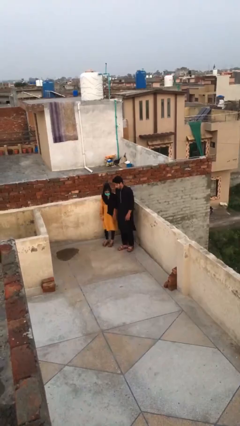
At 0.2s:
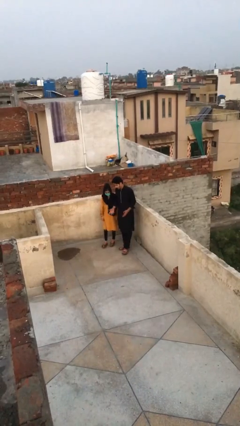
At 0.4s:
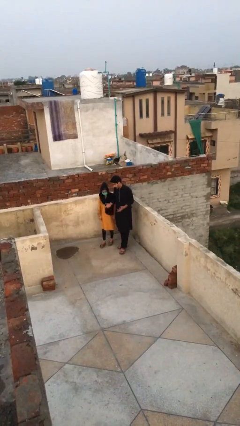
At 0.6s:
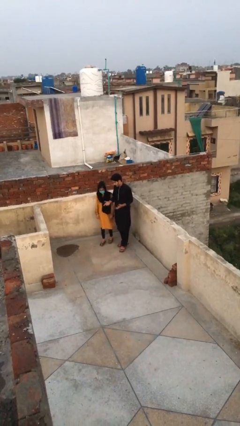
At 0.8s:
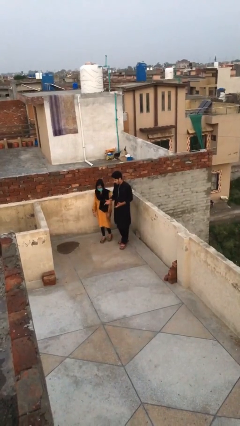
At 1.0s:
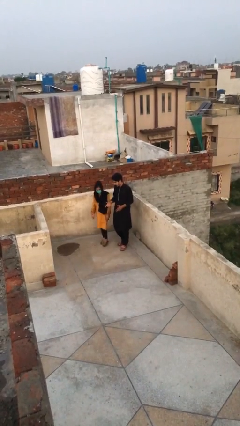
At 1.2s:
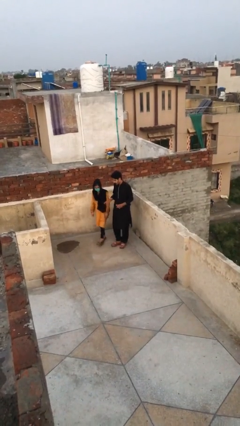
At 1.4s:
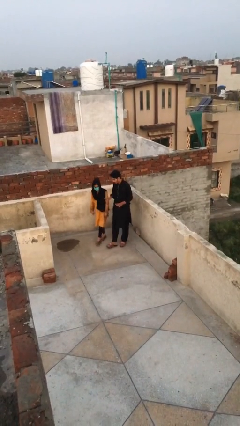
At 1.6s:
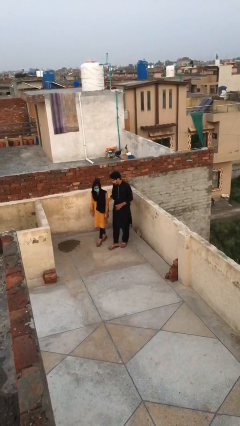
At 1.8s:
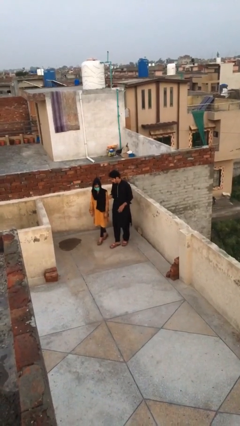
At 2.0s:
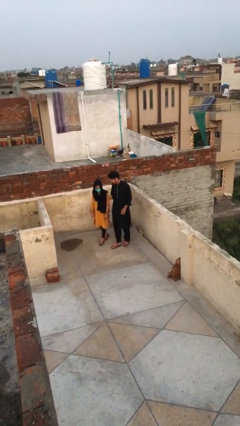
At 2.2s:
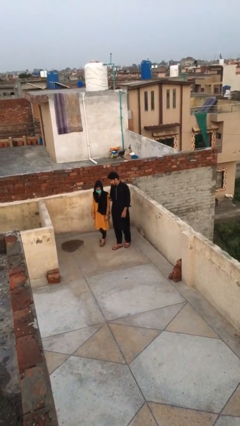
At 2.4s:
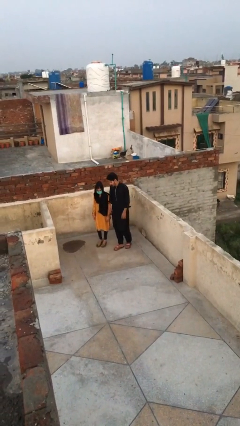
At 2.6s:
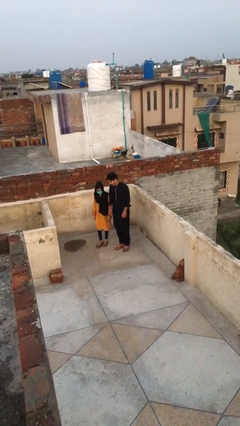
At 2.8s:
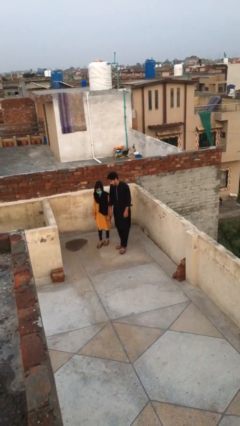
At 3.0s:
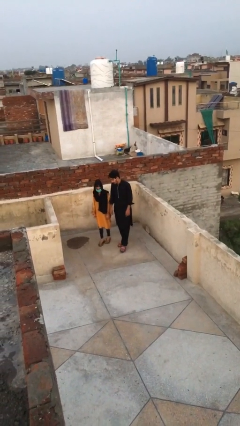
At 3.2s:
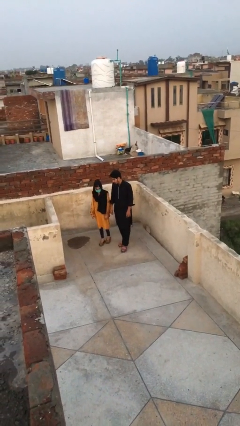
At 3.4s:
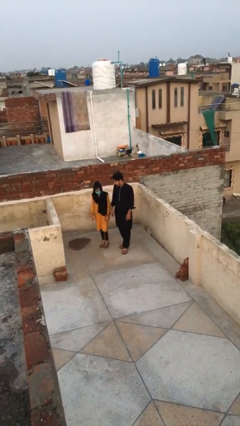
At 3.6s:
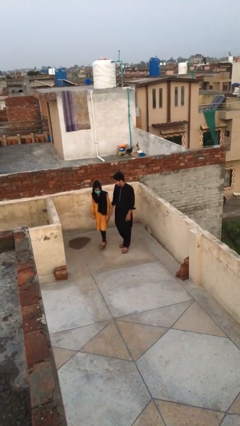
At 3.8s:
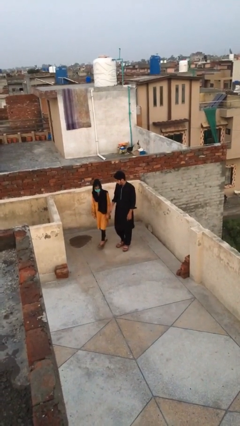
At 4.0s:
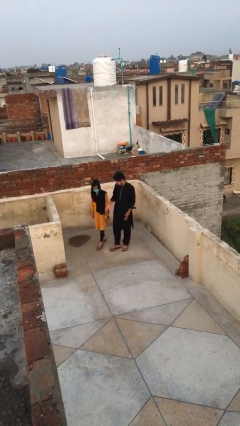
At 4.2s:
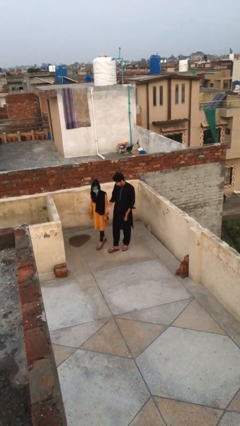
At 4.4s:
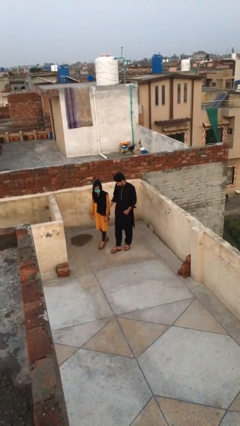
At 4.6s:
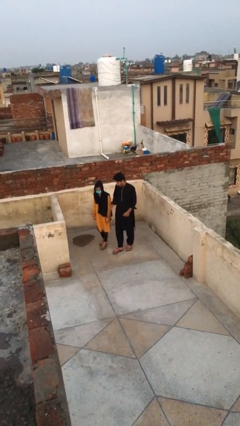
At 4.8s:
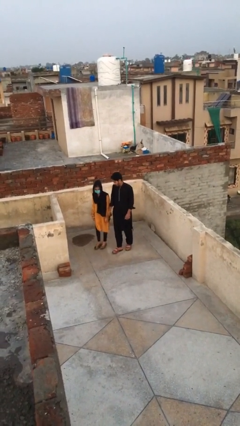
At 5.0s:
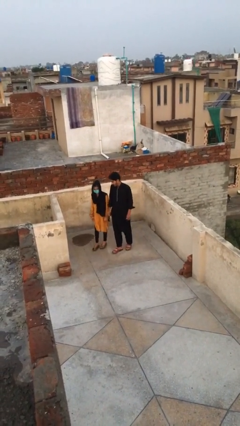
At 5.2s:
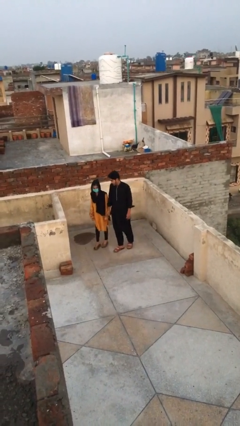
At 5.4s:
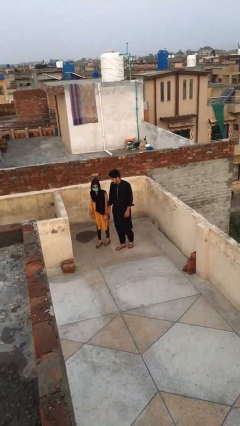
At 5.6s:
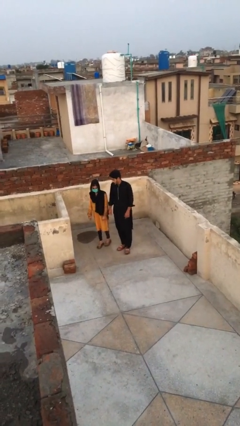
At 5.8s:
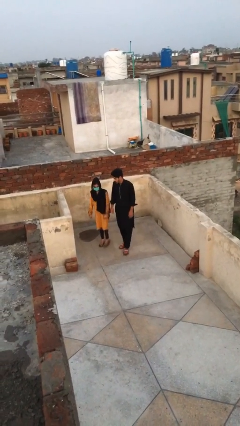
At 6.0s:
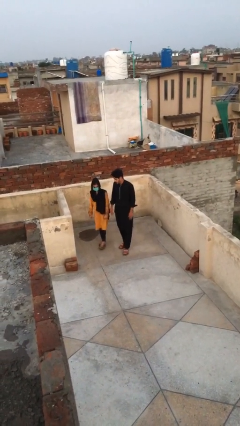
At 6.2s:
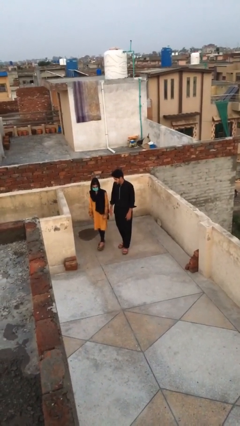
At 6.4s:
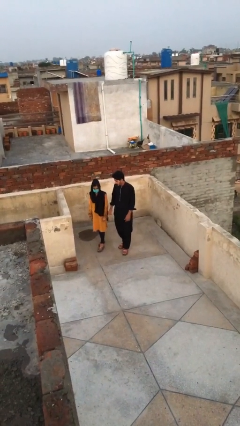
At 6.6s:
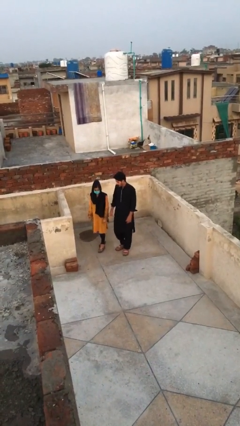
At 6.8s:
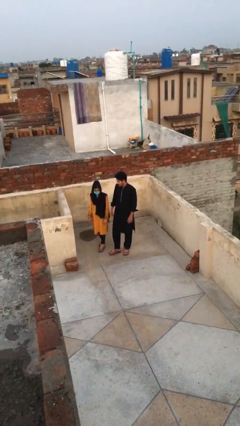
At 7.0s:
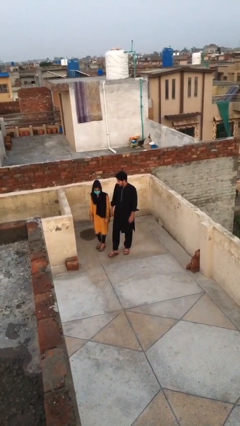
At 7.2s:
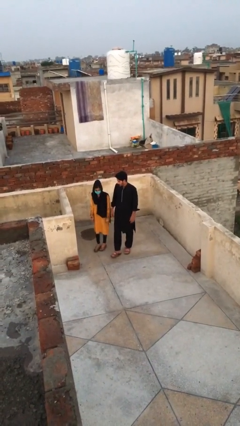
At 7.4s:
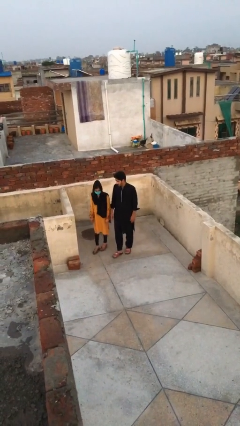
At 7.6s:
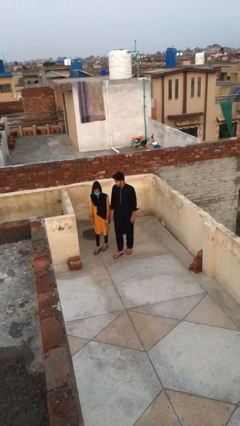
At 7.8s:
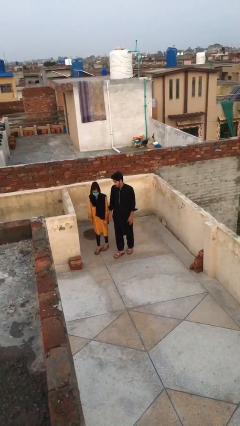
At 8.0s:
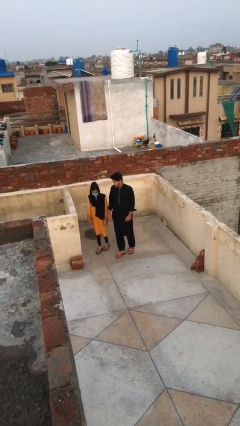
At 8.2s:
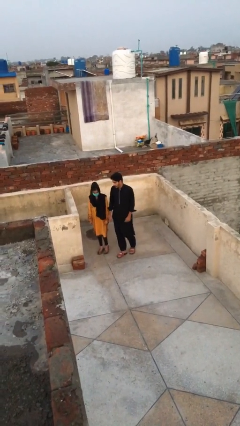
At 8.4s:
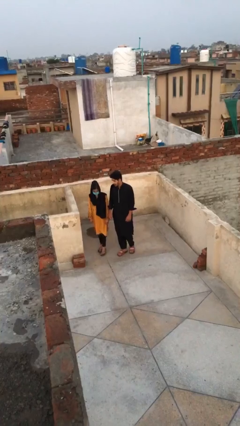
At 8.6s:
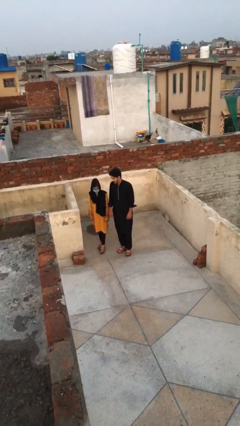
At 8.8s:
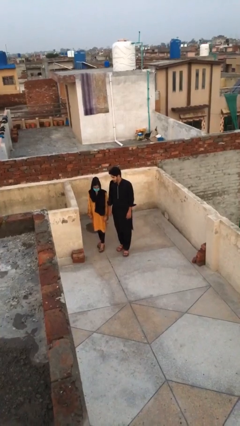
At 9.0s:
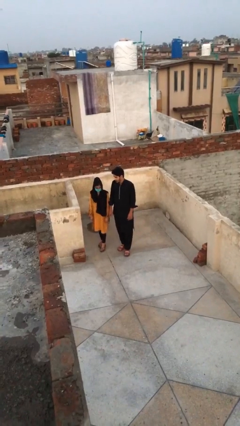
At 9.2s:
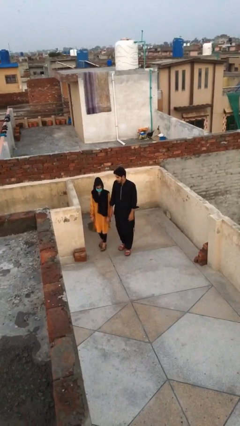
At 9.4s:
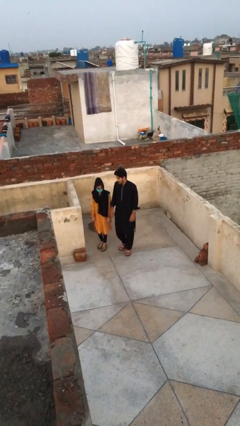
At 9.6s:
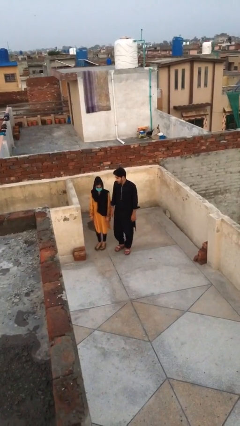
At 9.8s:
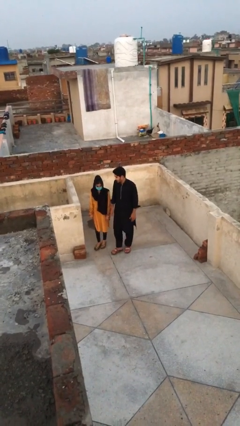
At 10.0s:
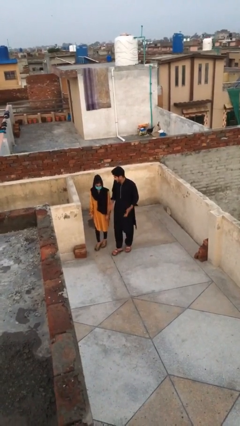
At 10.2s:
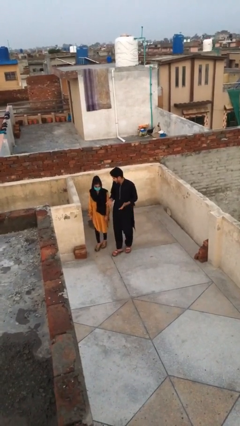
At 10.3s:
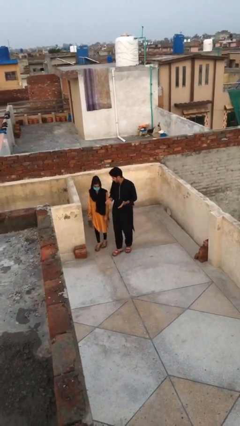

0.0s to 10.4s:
person talks to person

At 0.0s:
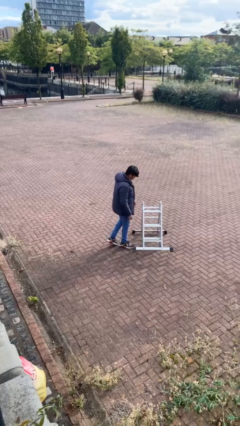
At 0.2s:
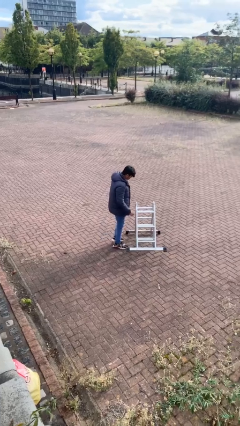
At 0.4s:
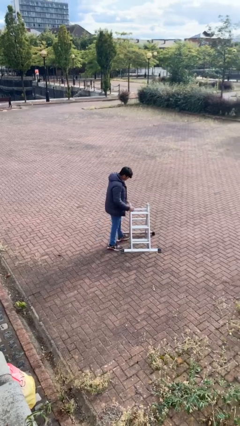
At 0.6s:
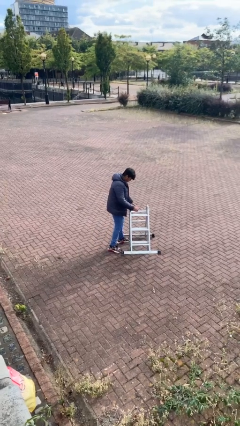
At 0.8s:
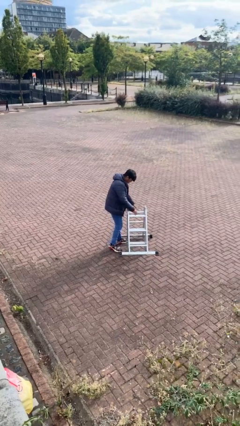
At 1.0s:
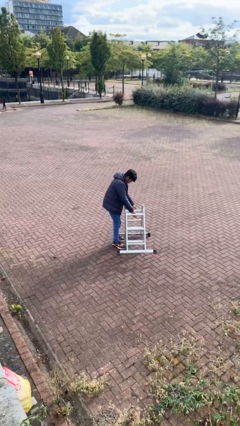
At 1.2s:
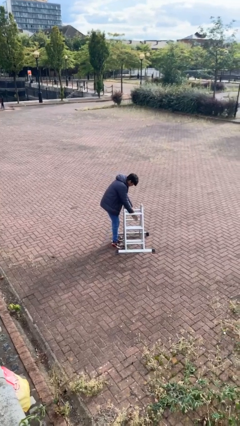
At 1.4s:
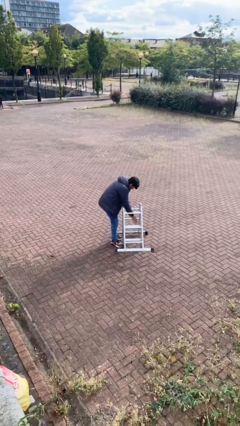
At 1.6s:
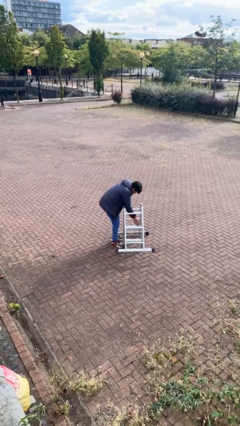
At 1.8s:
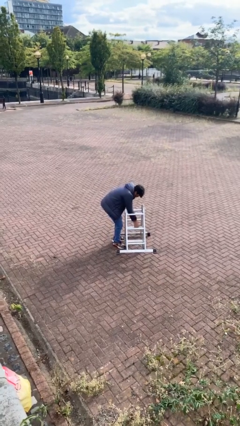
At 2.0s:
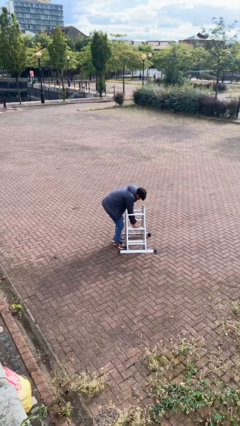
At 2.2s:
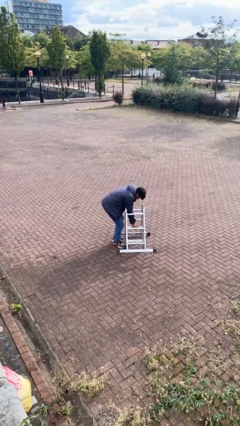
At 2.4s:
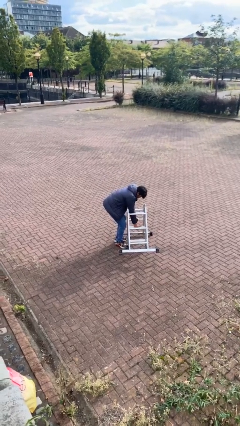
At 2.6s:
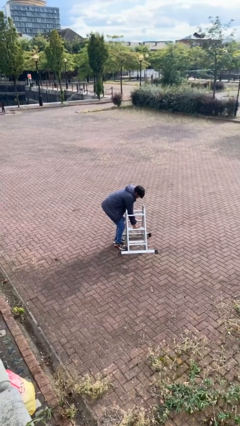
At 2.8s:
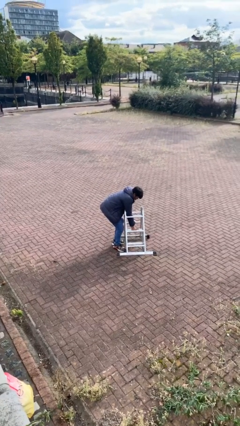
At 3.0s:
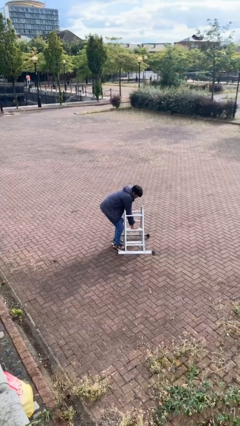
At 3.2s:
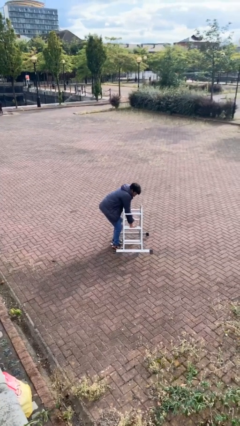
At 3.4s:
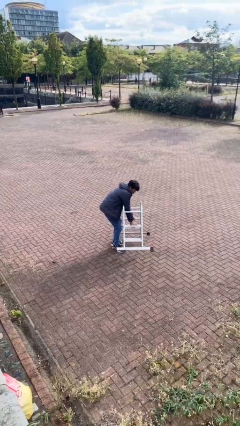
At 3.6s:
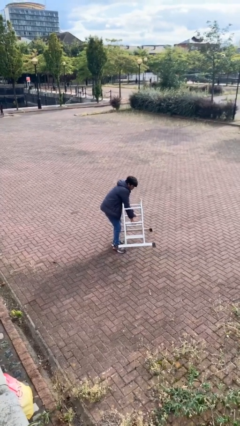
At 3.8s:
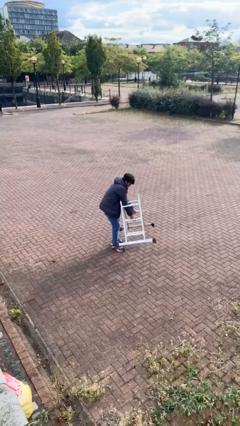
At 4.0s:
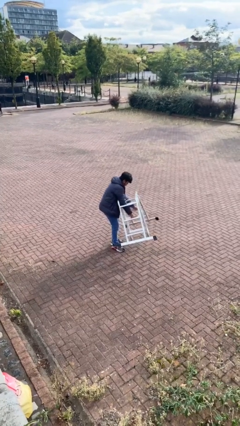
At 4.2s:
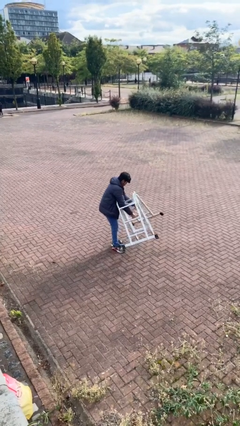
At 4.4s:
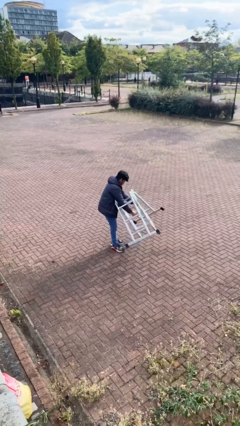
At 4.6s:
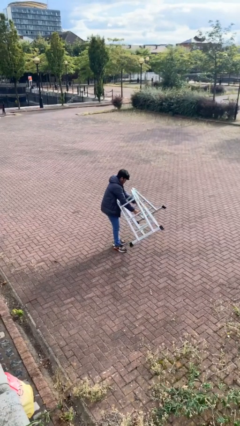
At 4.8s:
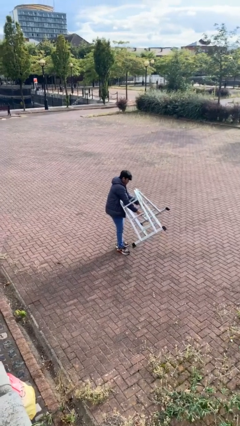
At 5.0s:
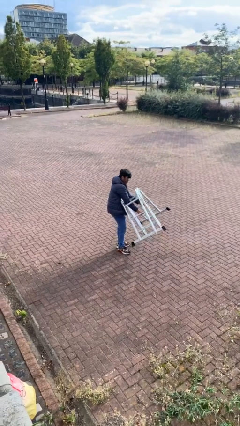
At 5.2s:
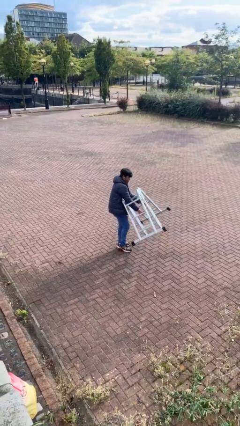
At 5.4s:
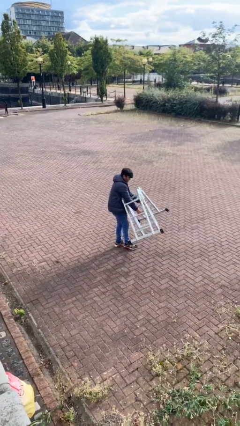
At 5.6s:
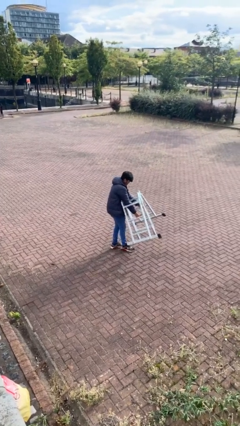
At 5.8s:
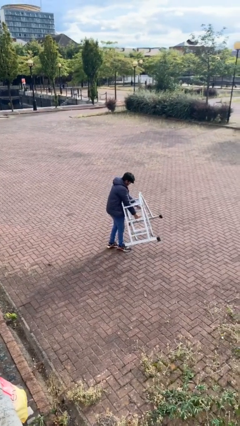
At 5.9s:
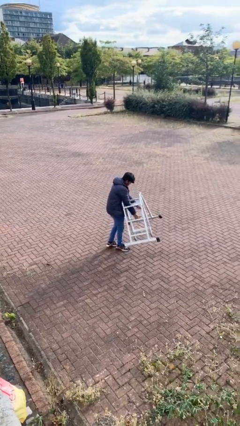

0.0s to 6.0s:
person picks up object from floor

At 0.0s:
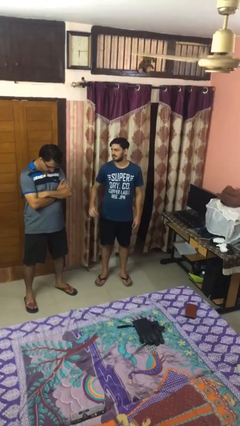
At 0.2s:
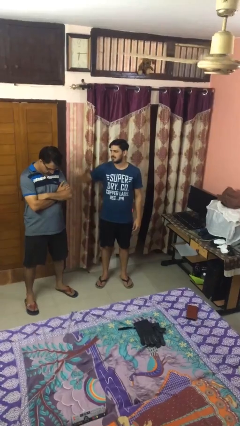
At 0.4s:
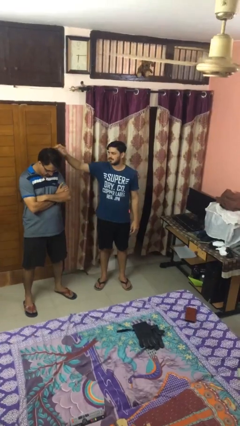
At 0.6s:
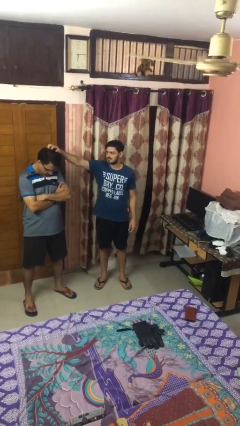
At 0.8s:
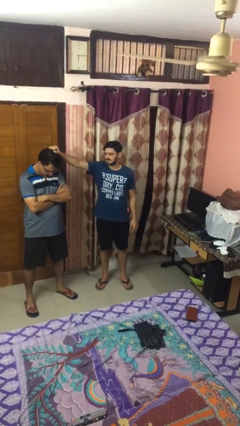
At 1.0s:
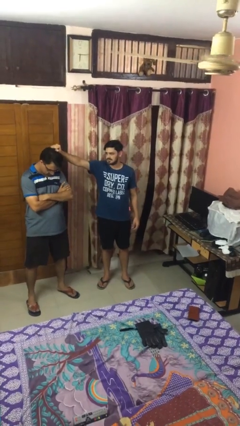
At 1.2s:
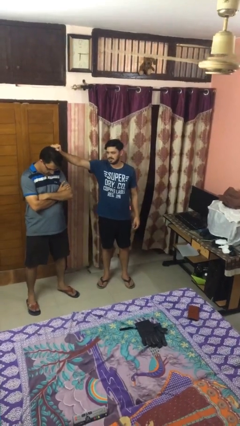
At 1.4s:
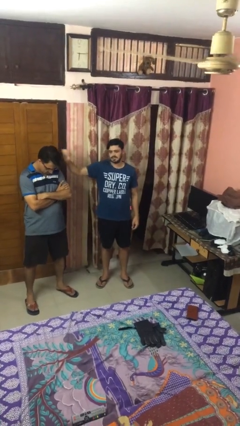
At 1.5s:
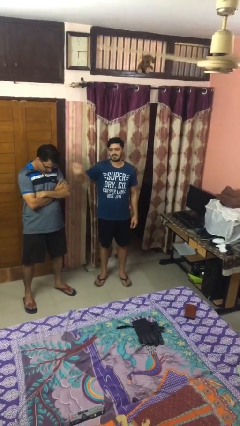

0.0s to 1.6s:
person grabs person by hair
